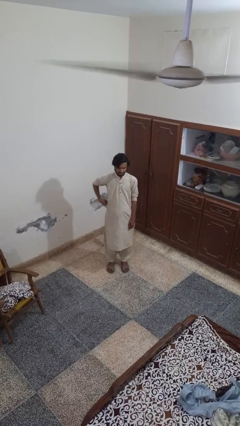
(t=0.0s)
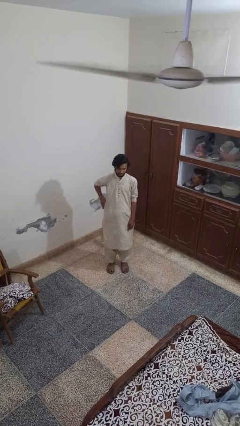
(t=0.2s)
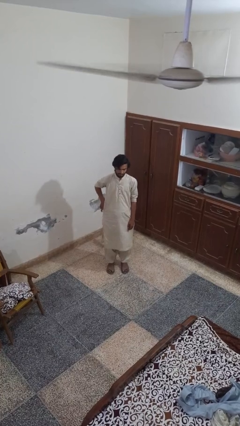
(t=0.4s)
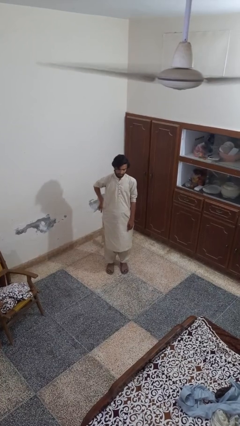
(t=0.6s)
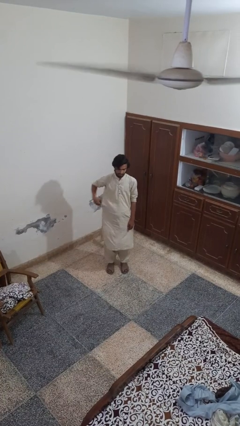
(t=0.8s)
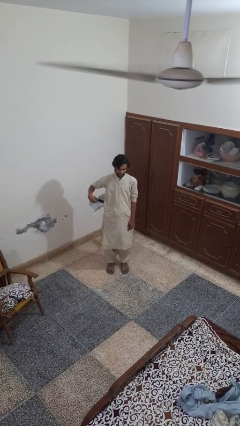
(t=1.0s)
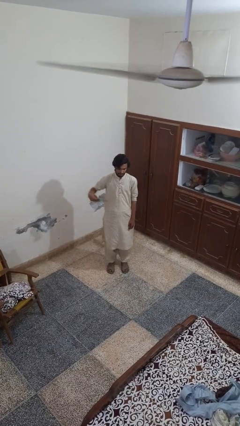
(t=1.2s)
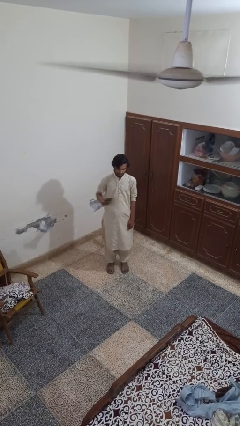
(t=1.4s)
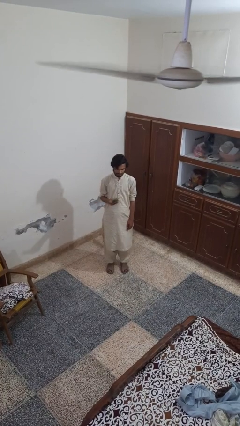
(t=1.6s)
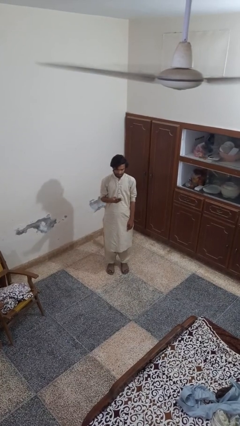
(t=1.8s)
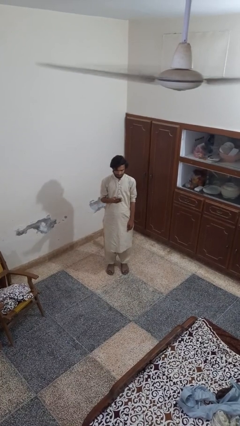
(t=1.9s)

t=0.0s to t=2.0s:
person takes phone from pocket

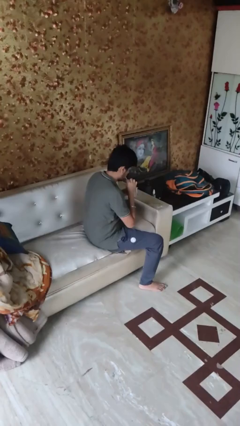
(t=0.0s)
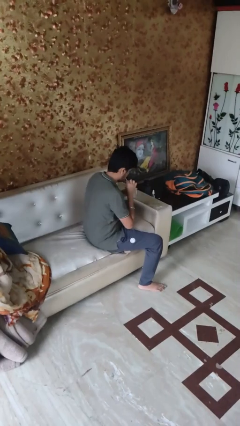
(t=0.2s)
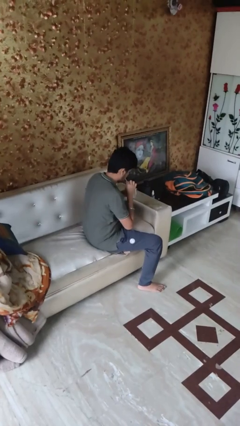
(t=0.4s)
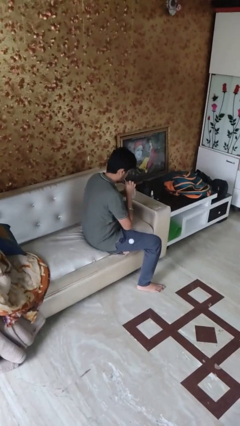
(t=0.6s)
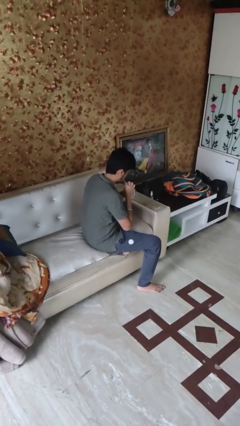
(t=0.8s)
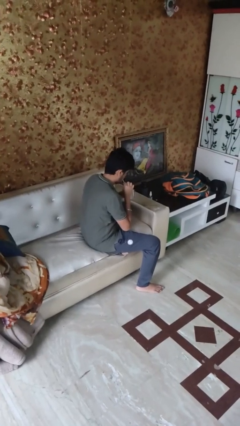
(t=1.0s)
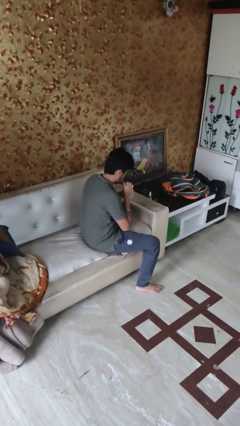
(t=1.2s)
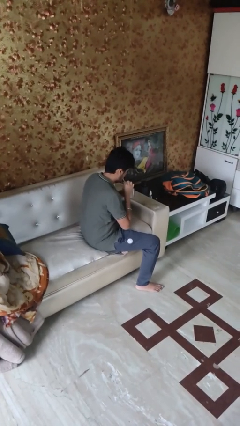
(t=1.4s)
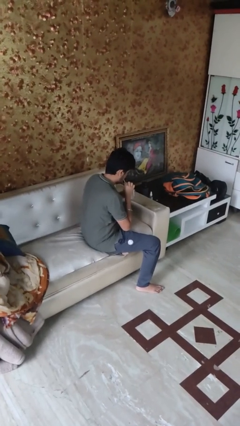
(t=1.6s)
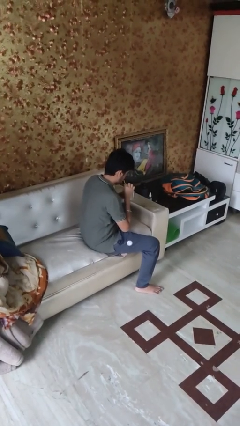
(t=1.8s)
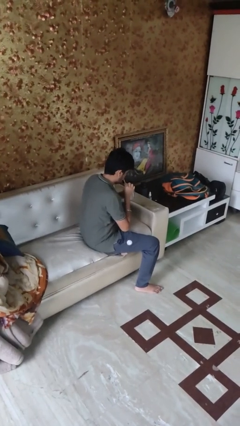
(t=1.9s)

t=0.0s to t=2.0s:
person drinks from straw

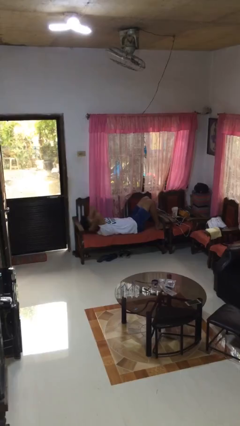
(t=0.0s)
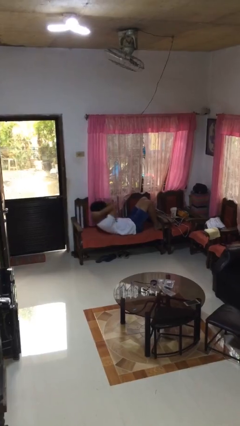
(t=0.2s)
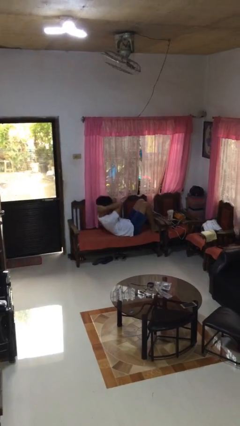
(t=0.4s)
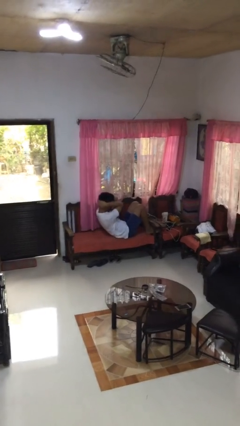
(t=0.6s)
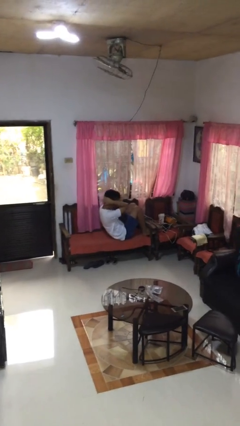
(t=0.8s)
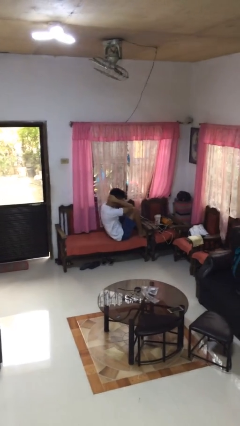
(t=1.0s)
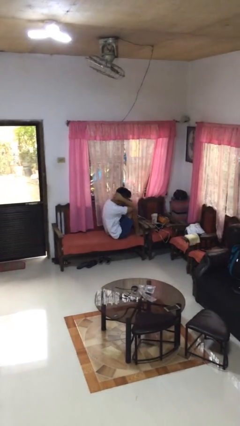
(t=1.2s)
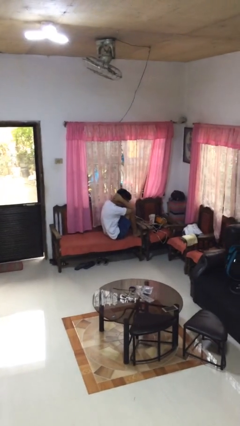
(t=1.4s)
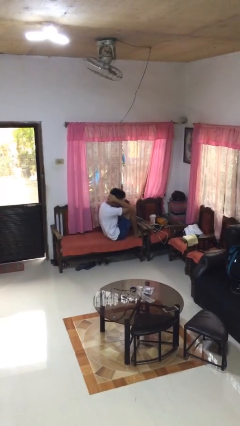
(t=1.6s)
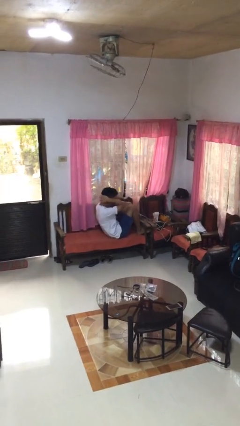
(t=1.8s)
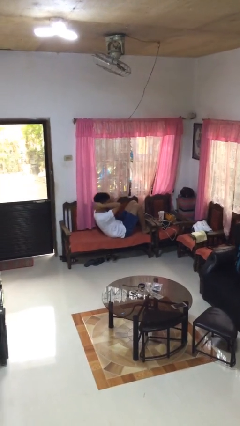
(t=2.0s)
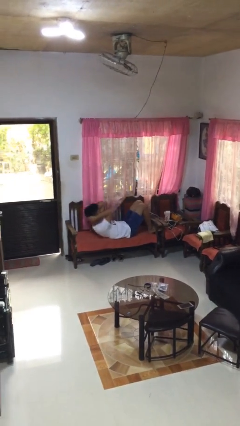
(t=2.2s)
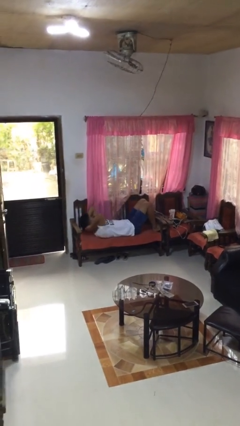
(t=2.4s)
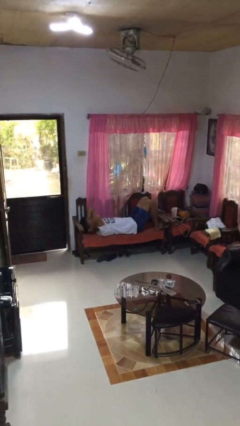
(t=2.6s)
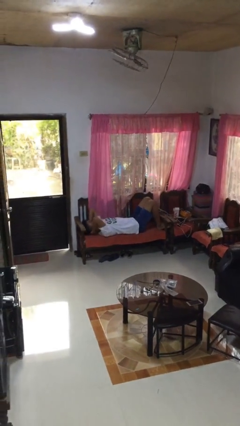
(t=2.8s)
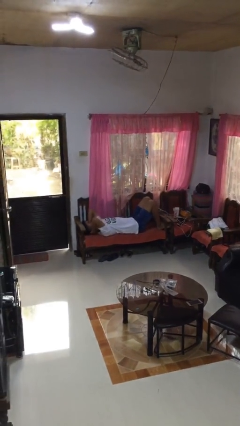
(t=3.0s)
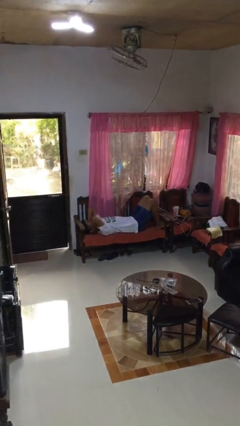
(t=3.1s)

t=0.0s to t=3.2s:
person exercises with situp

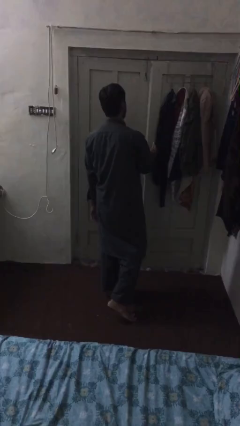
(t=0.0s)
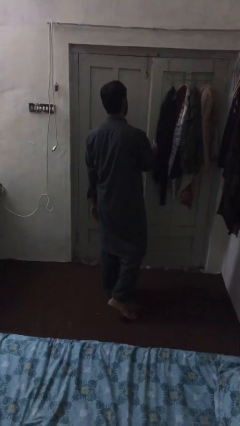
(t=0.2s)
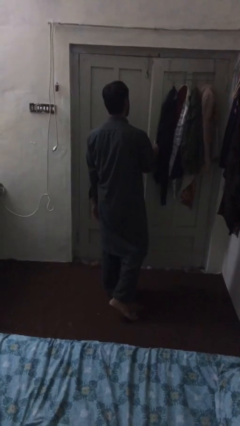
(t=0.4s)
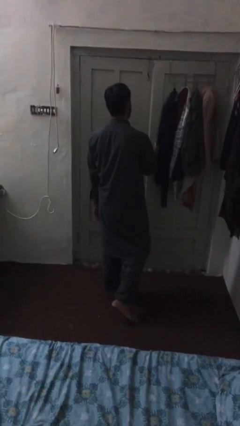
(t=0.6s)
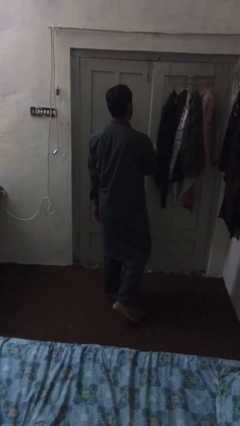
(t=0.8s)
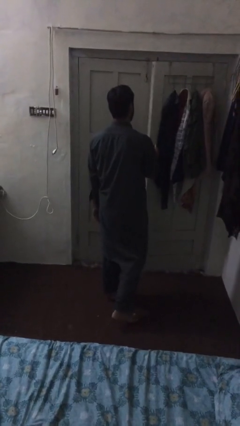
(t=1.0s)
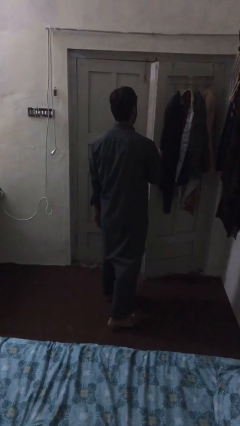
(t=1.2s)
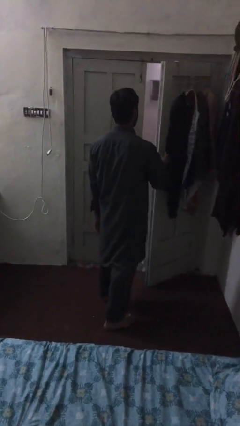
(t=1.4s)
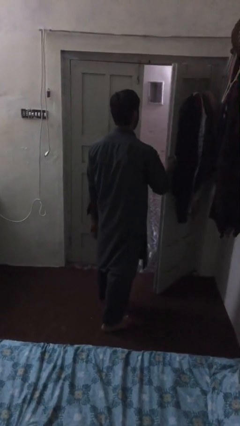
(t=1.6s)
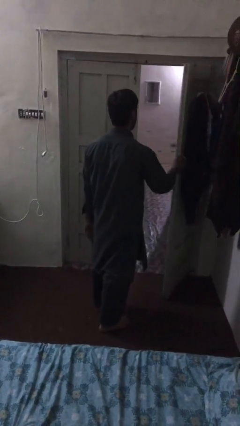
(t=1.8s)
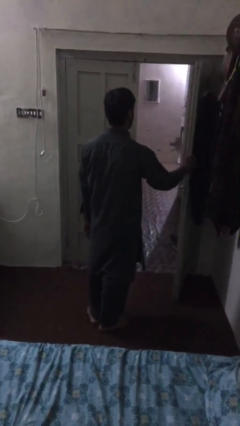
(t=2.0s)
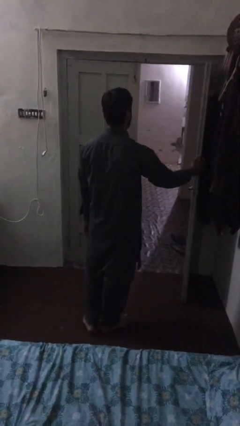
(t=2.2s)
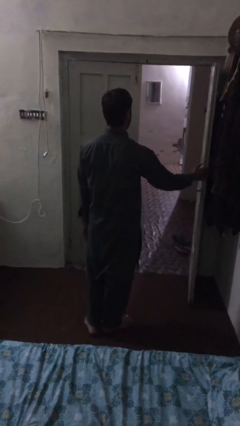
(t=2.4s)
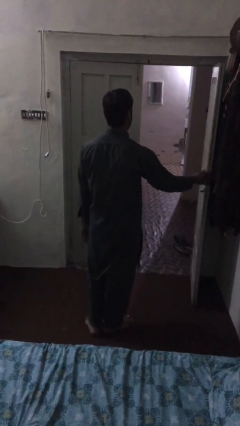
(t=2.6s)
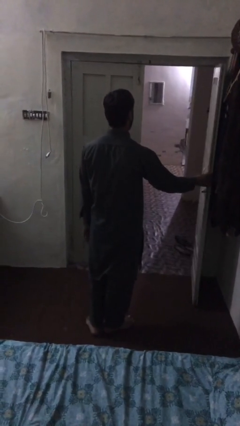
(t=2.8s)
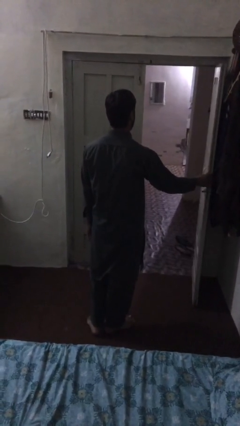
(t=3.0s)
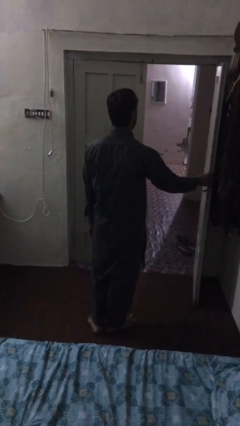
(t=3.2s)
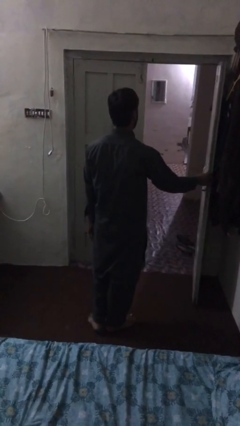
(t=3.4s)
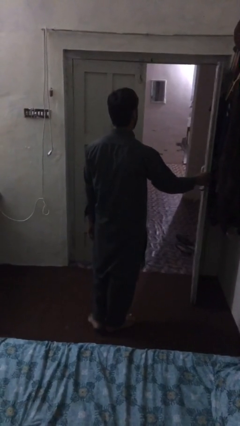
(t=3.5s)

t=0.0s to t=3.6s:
person opens facility door

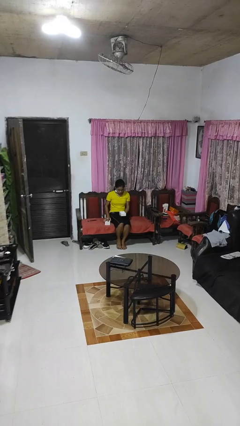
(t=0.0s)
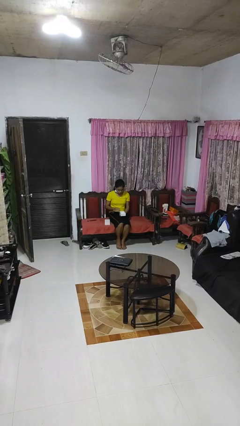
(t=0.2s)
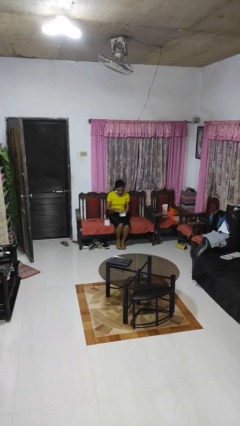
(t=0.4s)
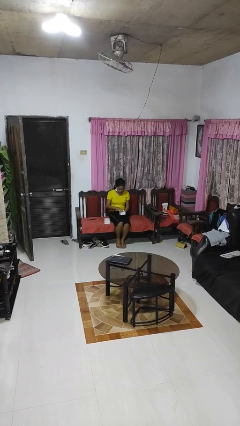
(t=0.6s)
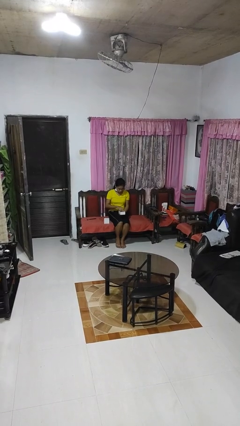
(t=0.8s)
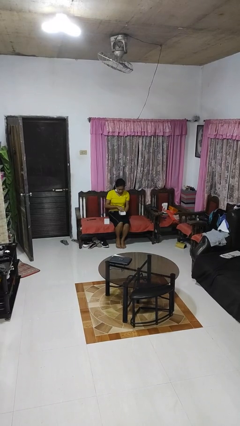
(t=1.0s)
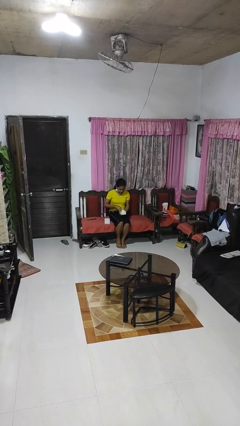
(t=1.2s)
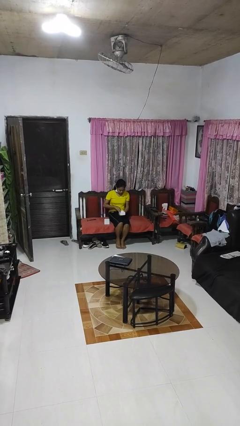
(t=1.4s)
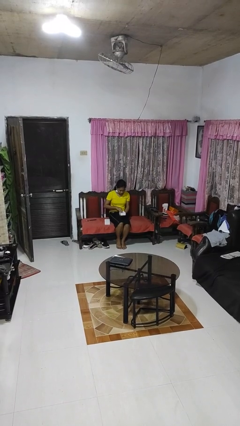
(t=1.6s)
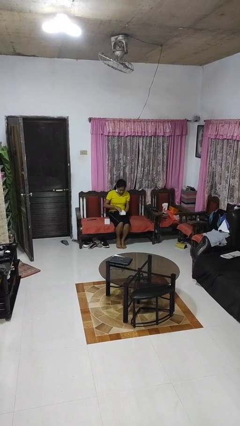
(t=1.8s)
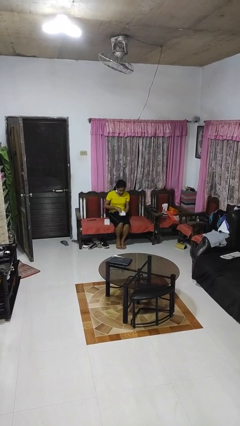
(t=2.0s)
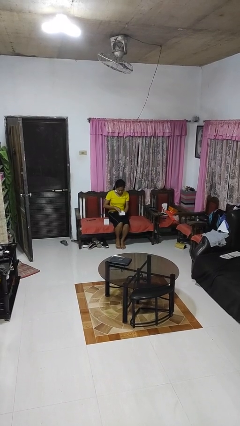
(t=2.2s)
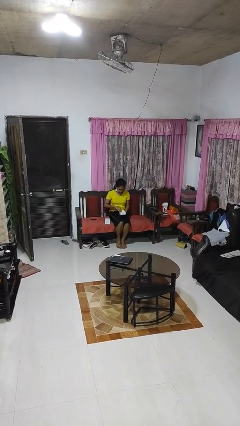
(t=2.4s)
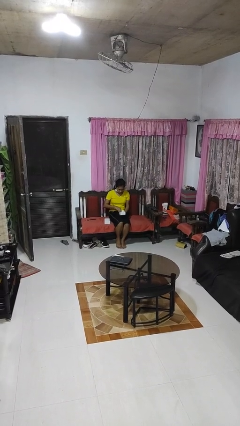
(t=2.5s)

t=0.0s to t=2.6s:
person searches jewelry box

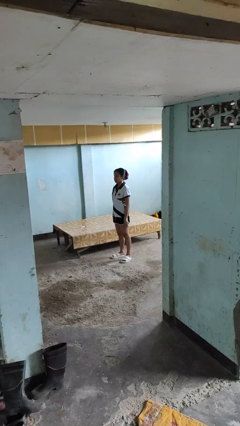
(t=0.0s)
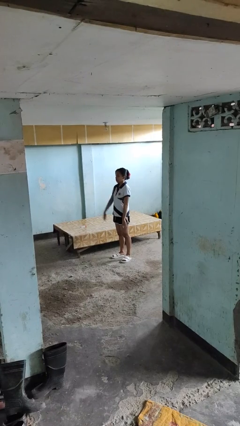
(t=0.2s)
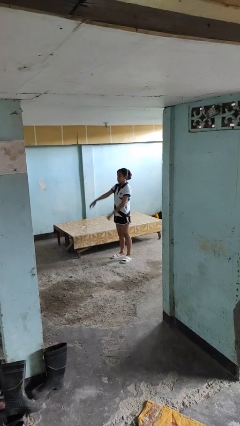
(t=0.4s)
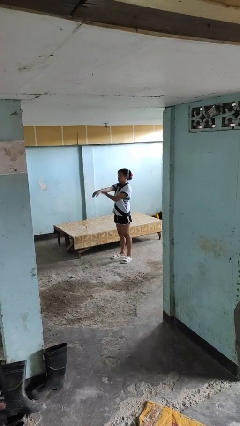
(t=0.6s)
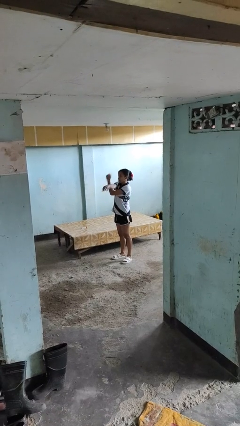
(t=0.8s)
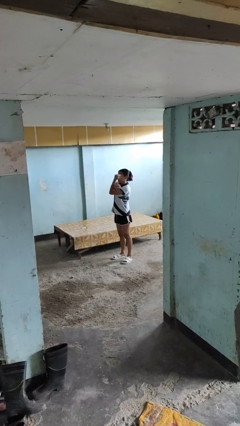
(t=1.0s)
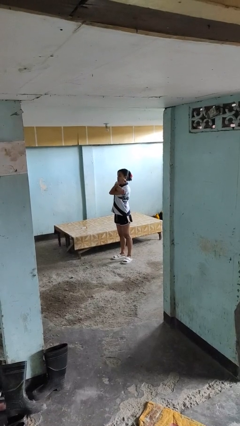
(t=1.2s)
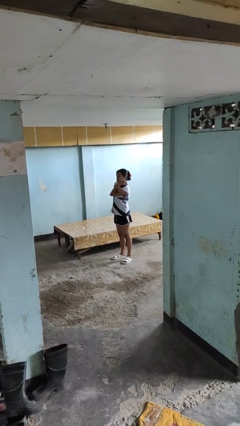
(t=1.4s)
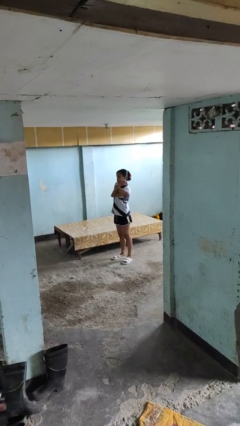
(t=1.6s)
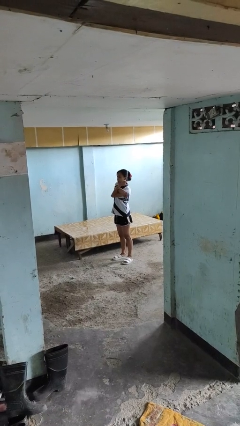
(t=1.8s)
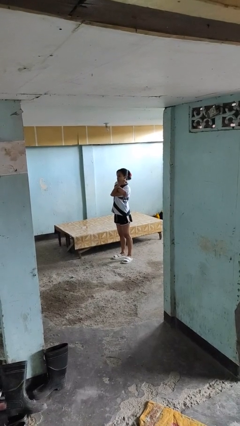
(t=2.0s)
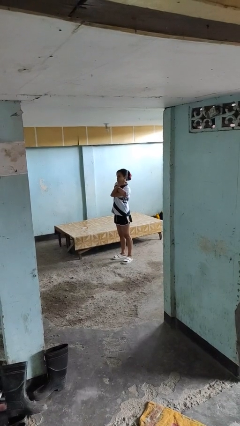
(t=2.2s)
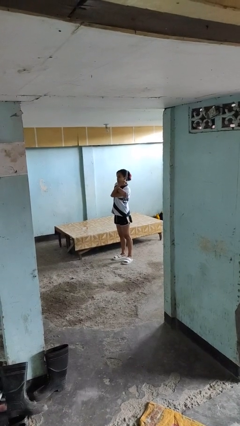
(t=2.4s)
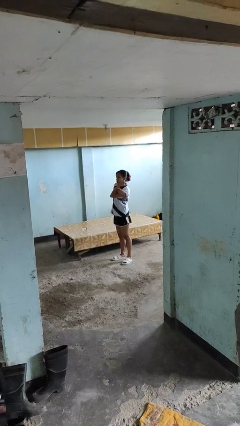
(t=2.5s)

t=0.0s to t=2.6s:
person crosses arms

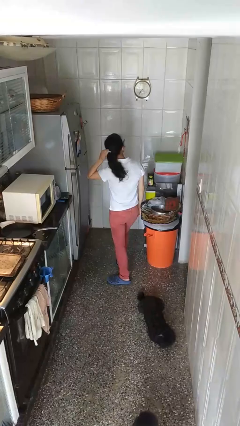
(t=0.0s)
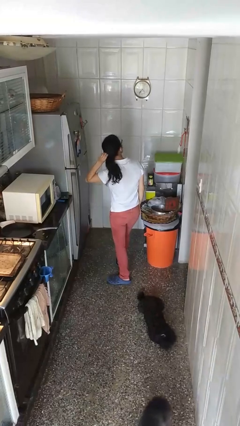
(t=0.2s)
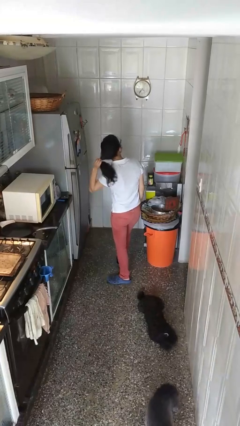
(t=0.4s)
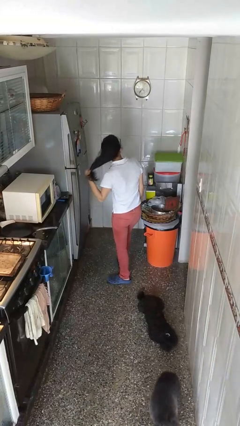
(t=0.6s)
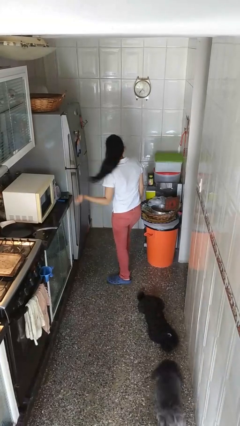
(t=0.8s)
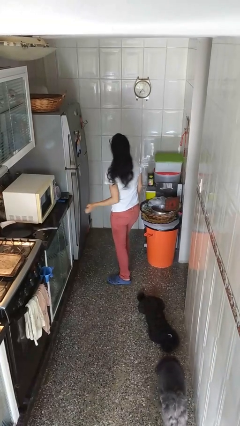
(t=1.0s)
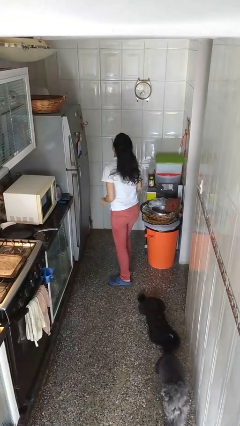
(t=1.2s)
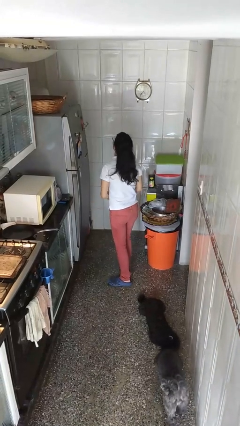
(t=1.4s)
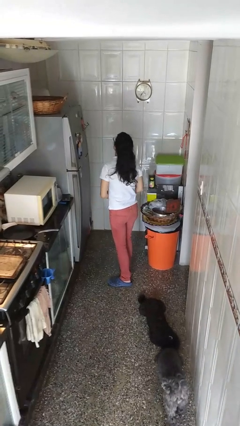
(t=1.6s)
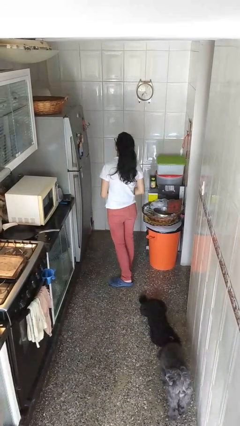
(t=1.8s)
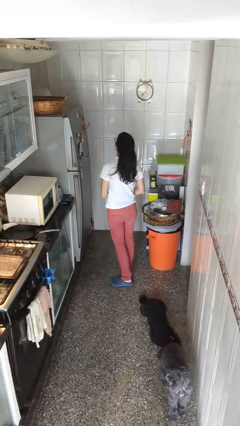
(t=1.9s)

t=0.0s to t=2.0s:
person takes off hairtie
